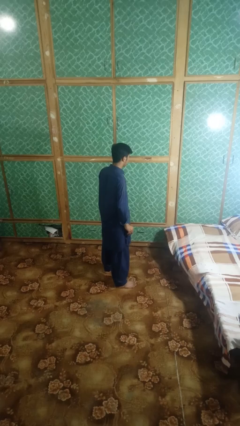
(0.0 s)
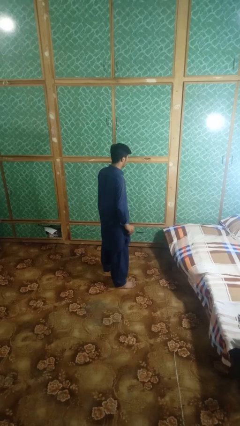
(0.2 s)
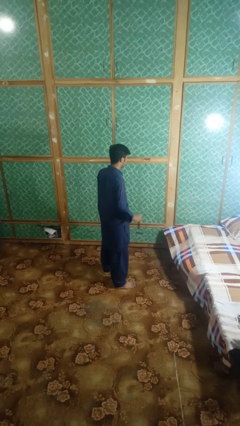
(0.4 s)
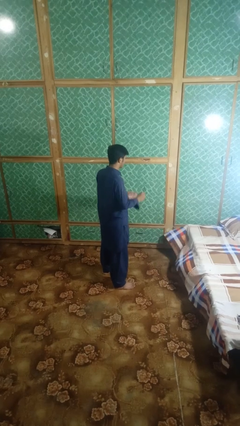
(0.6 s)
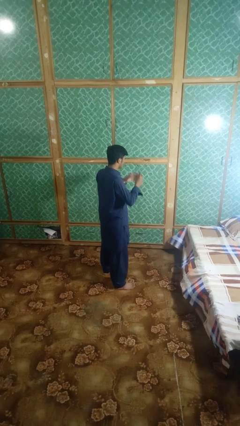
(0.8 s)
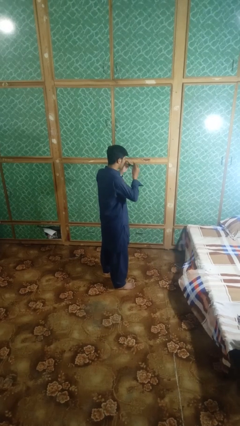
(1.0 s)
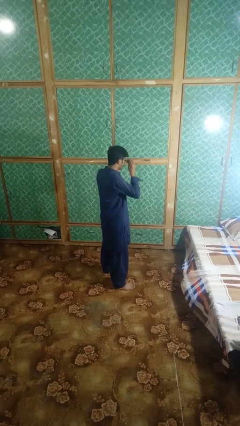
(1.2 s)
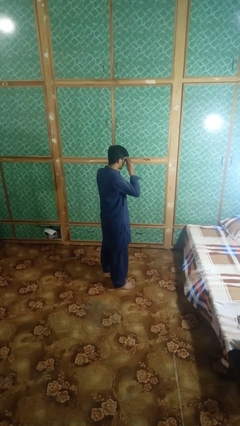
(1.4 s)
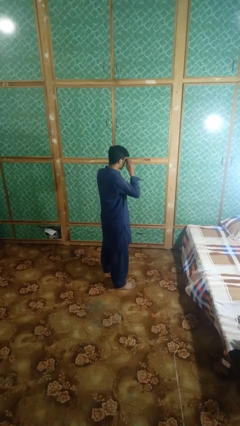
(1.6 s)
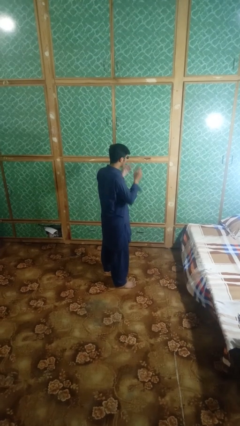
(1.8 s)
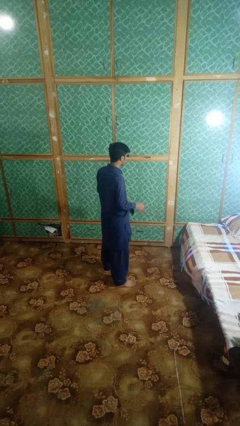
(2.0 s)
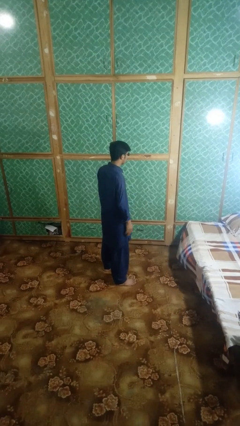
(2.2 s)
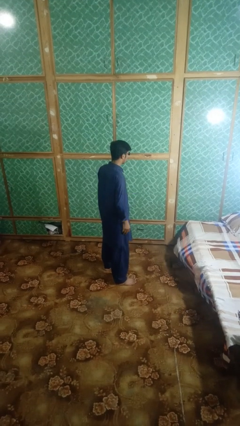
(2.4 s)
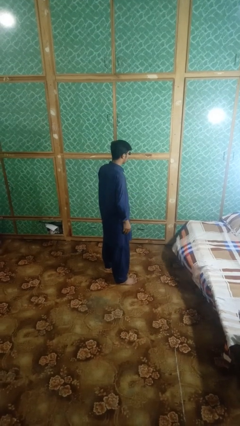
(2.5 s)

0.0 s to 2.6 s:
person puts on sunglasses

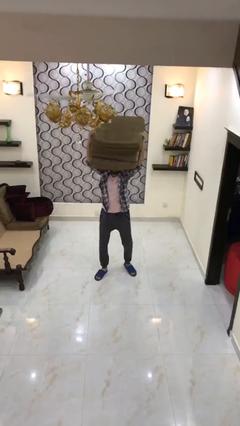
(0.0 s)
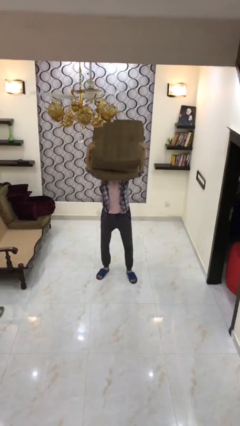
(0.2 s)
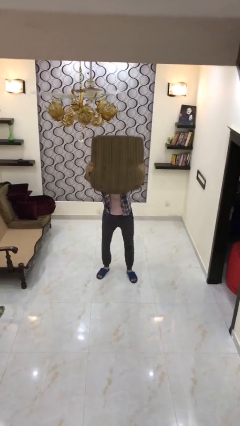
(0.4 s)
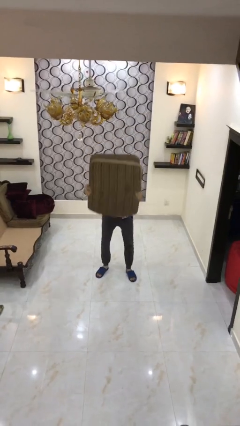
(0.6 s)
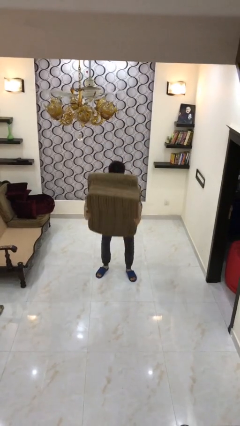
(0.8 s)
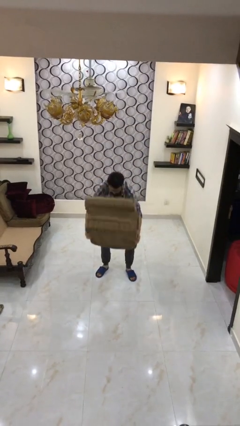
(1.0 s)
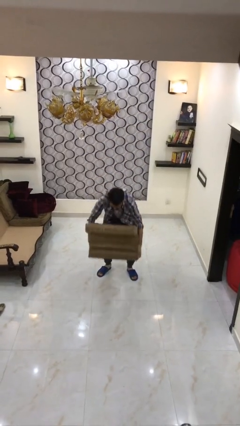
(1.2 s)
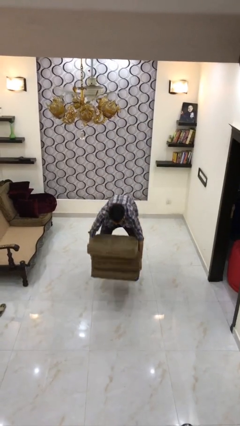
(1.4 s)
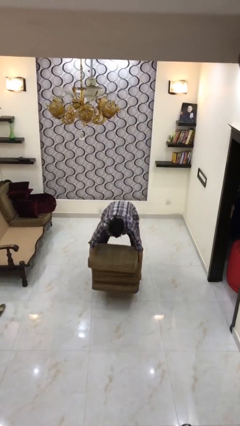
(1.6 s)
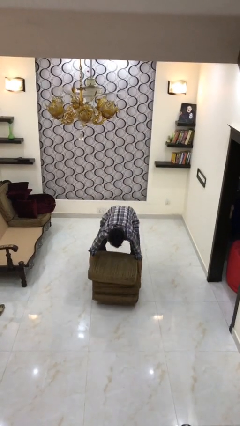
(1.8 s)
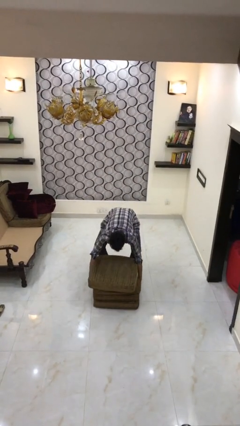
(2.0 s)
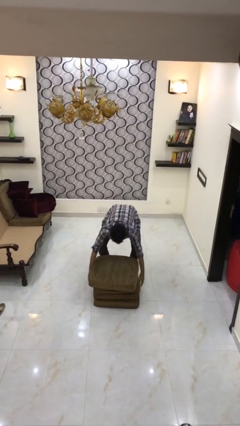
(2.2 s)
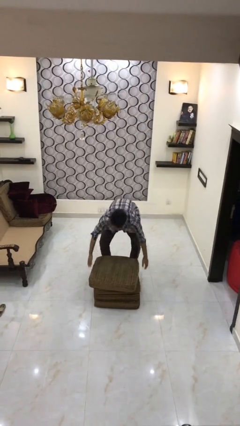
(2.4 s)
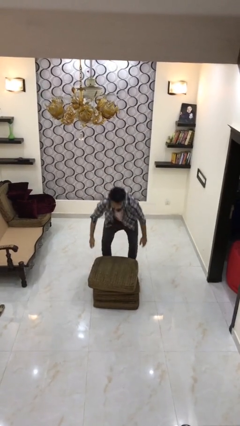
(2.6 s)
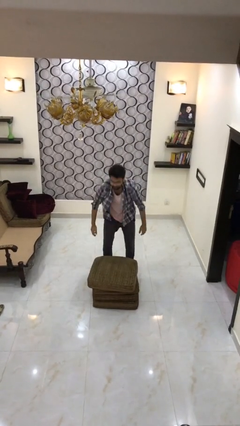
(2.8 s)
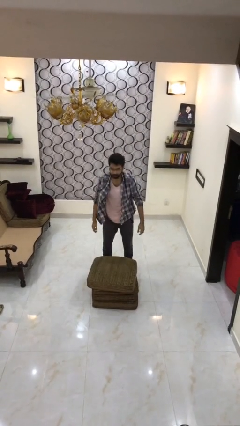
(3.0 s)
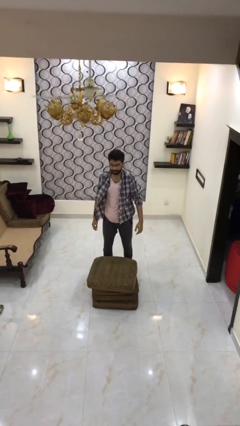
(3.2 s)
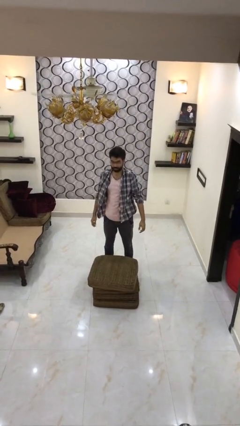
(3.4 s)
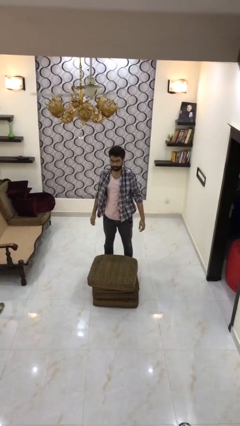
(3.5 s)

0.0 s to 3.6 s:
person puts down object on floor

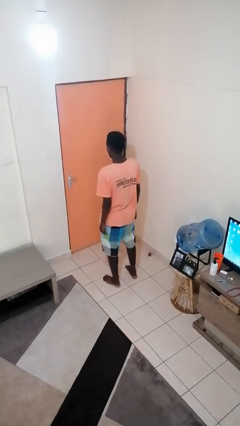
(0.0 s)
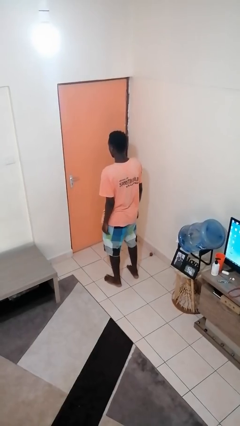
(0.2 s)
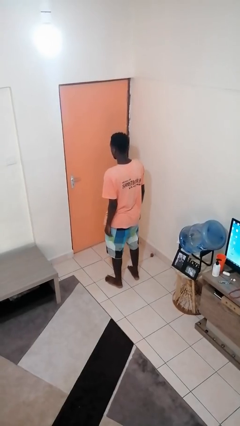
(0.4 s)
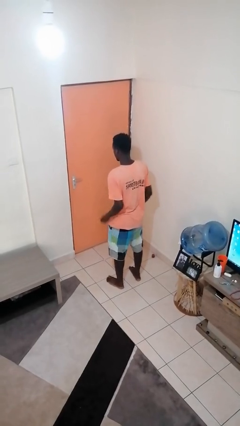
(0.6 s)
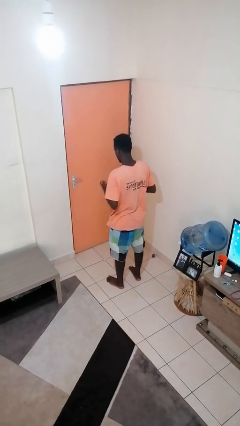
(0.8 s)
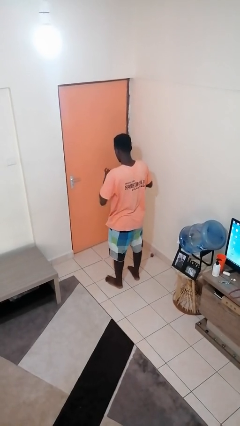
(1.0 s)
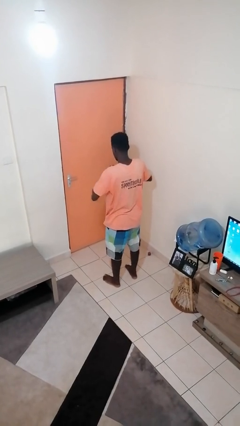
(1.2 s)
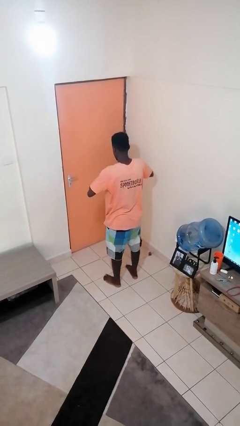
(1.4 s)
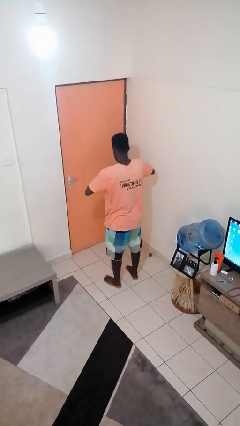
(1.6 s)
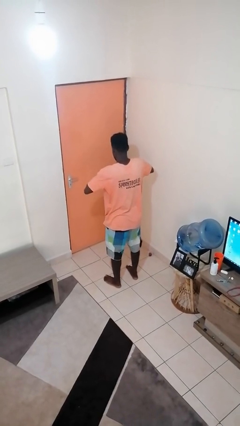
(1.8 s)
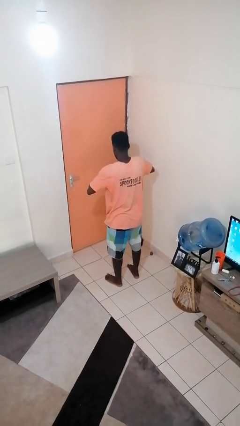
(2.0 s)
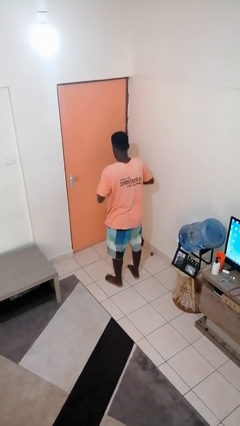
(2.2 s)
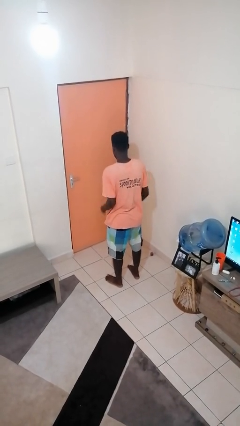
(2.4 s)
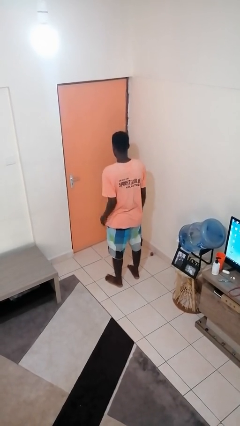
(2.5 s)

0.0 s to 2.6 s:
person puts on ring

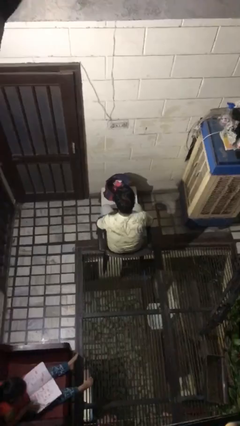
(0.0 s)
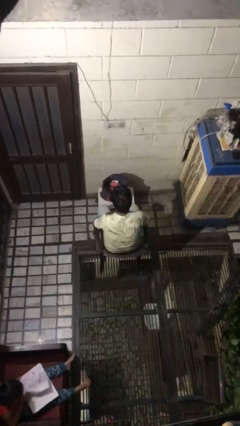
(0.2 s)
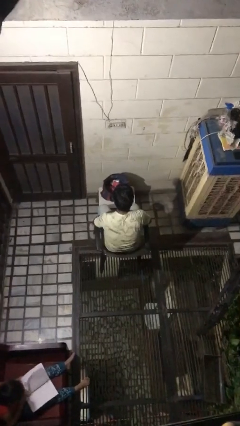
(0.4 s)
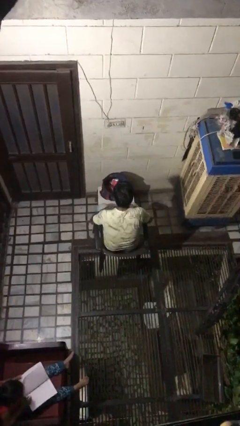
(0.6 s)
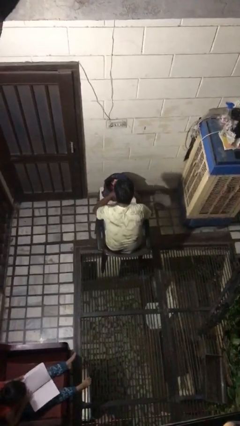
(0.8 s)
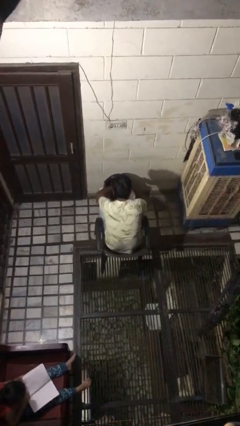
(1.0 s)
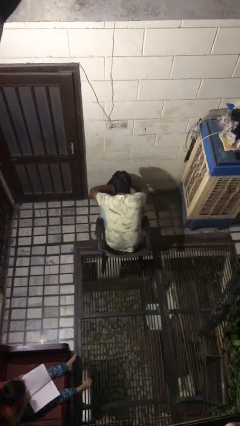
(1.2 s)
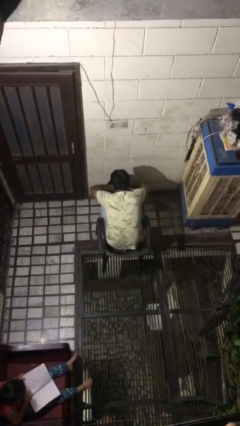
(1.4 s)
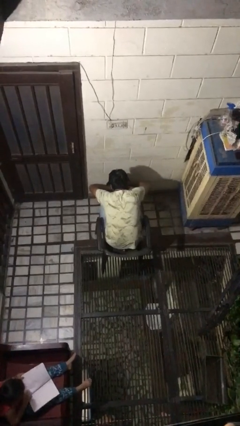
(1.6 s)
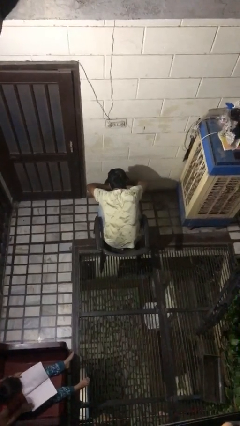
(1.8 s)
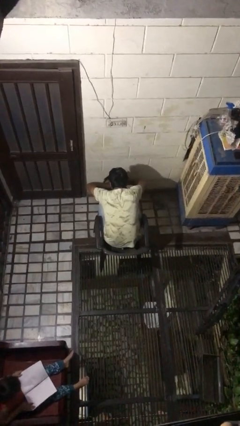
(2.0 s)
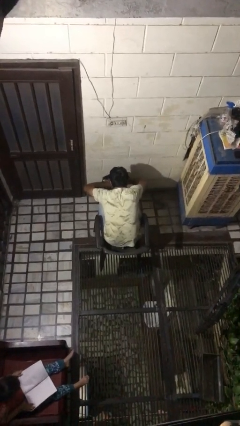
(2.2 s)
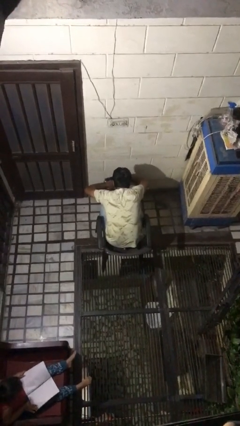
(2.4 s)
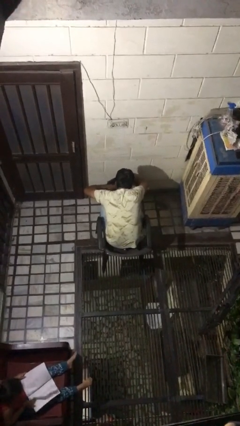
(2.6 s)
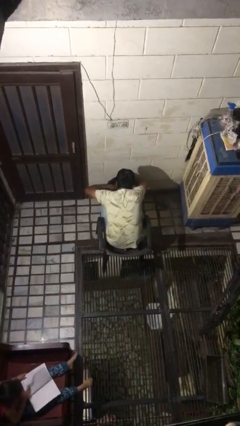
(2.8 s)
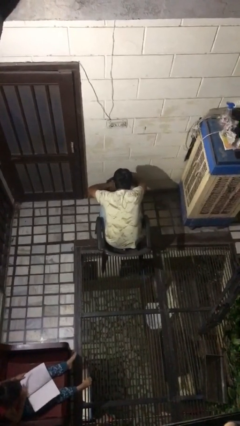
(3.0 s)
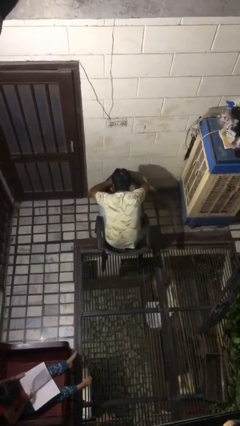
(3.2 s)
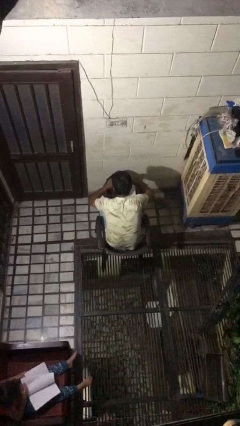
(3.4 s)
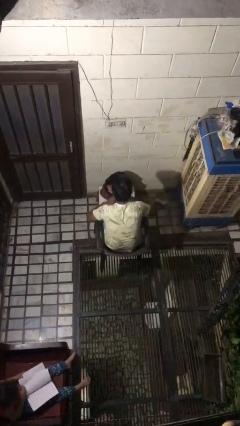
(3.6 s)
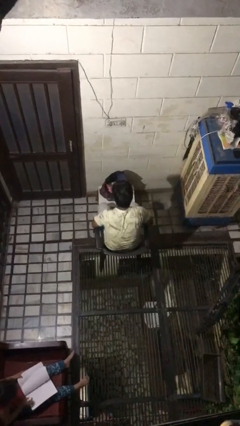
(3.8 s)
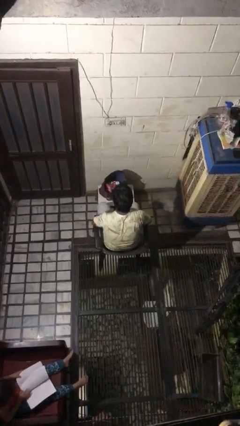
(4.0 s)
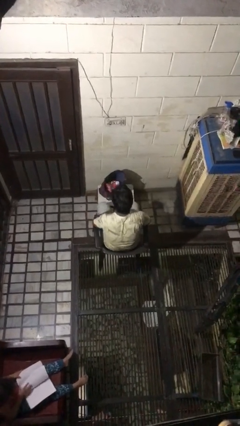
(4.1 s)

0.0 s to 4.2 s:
person searches in bag

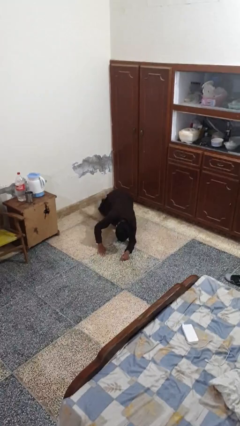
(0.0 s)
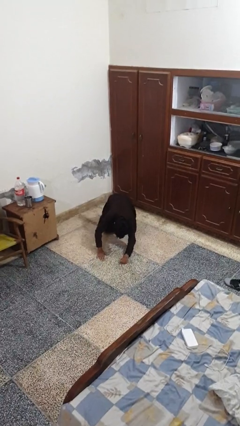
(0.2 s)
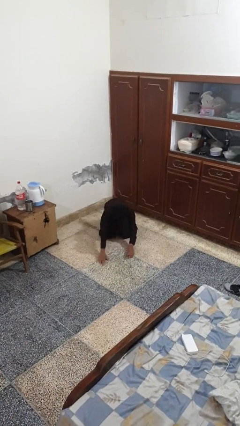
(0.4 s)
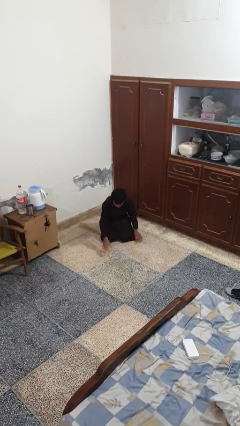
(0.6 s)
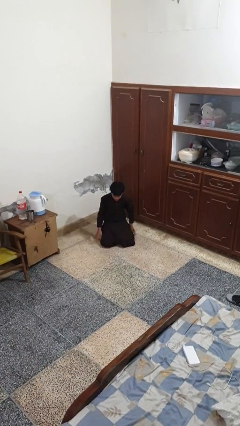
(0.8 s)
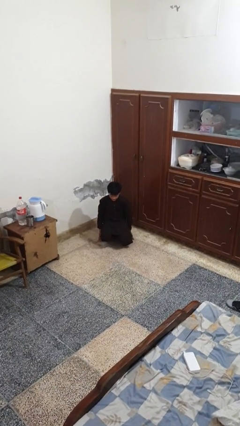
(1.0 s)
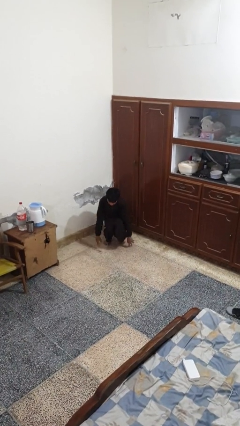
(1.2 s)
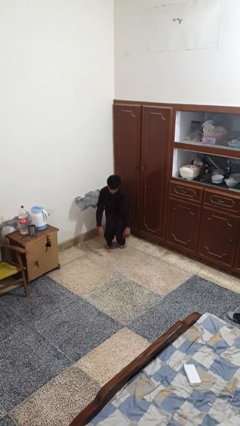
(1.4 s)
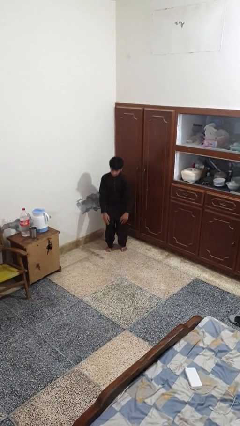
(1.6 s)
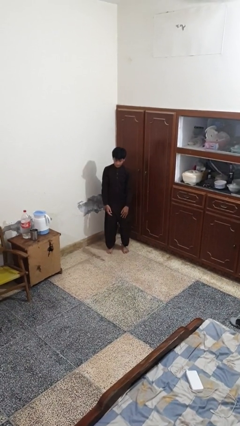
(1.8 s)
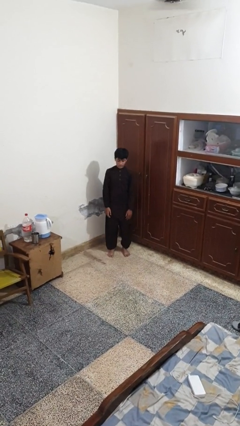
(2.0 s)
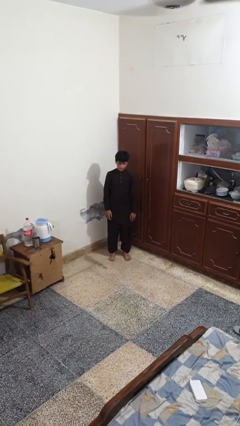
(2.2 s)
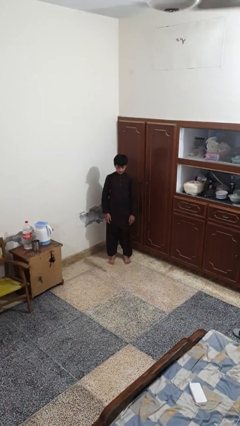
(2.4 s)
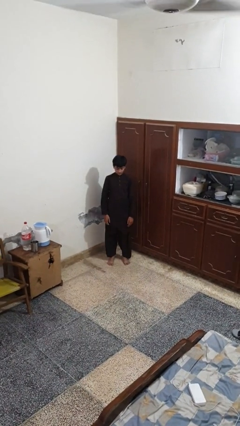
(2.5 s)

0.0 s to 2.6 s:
person stands up from floor

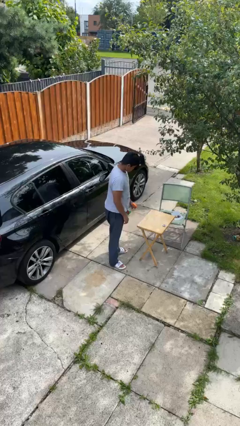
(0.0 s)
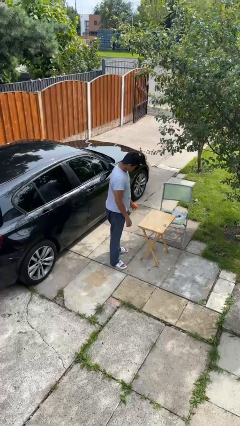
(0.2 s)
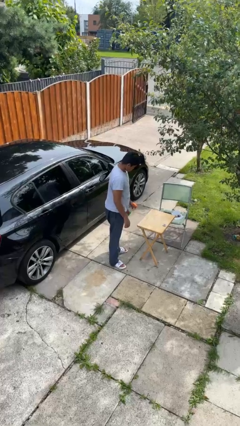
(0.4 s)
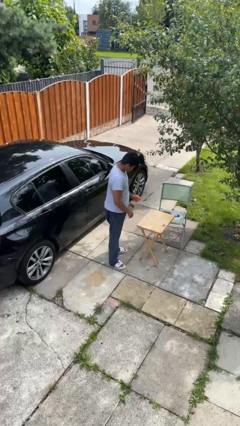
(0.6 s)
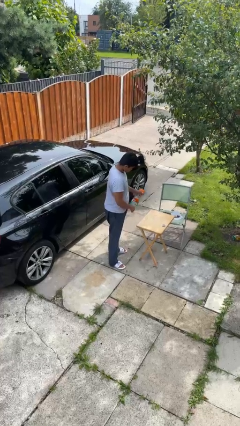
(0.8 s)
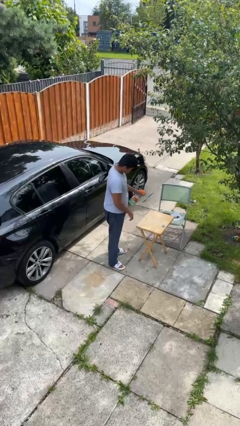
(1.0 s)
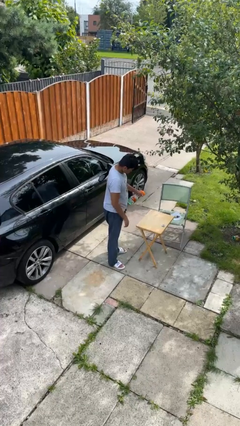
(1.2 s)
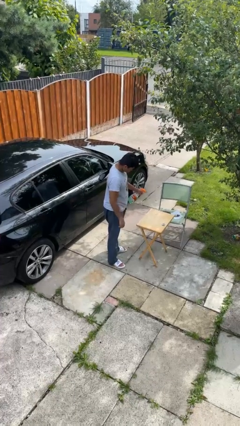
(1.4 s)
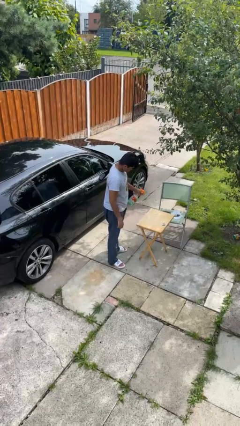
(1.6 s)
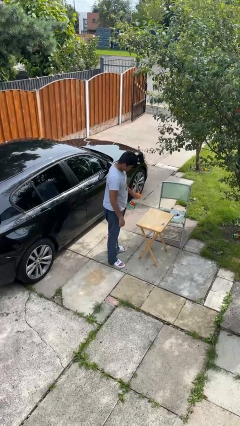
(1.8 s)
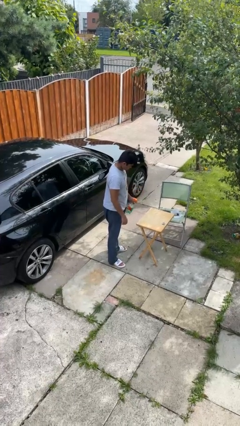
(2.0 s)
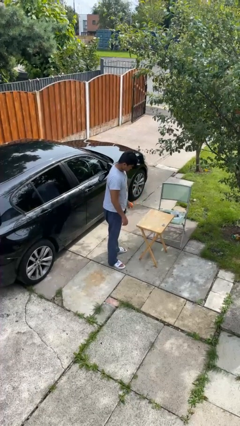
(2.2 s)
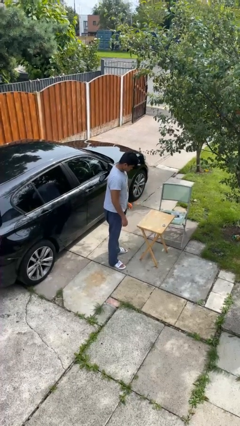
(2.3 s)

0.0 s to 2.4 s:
person sprays from bottle
